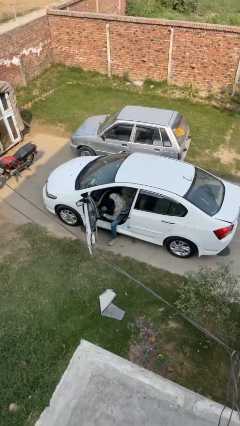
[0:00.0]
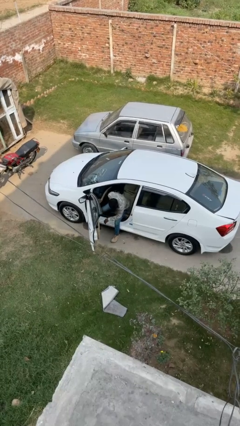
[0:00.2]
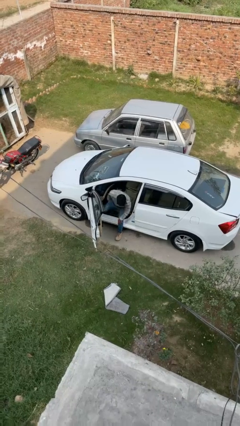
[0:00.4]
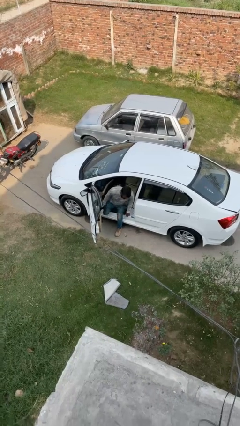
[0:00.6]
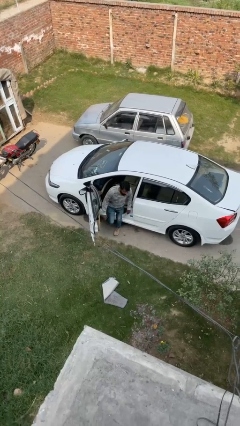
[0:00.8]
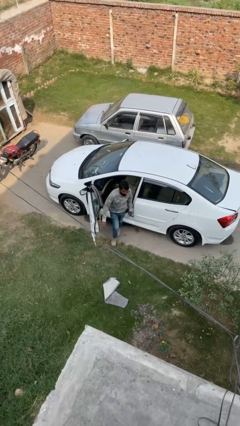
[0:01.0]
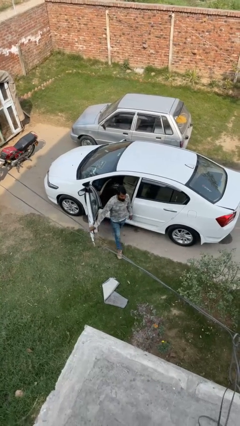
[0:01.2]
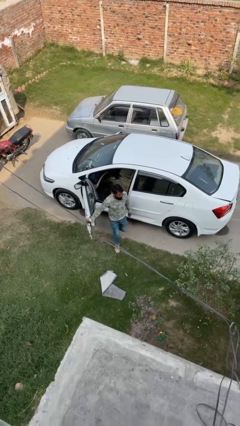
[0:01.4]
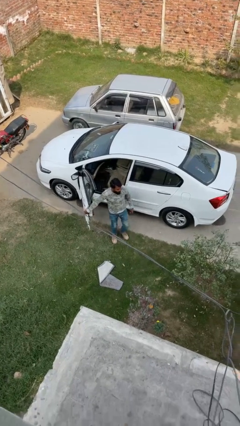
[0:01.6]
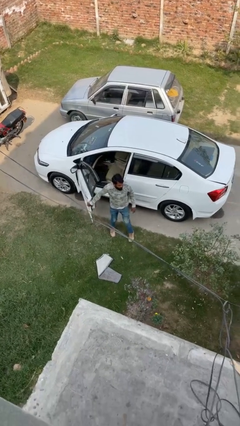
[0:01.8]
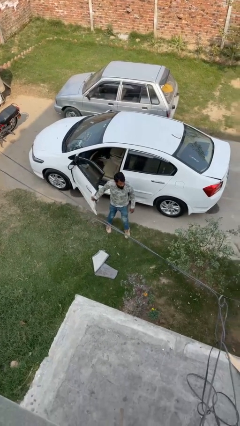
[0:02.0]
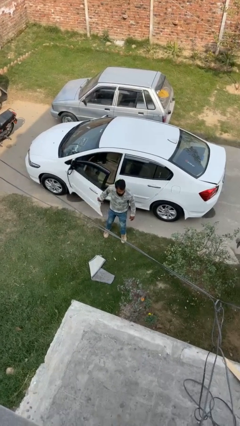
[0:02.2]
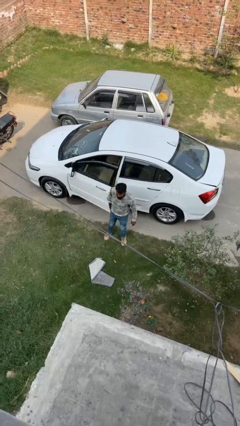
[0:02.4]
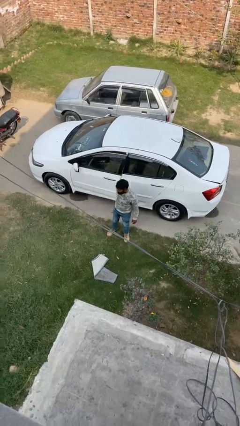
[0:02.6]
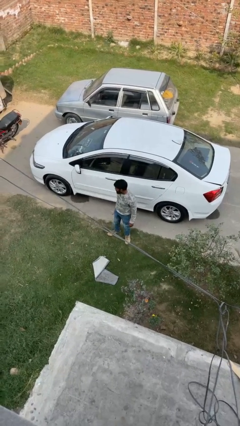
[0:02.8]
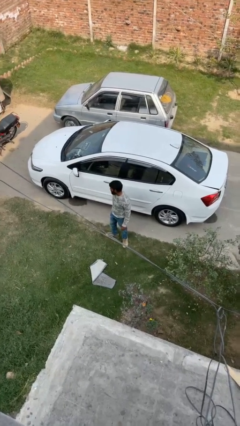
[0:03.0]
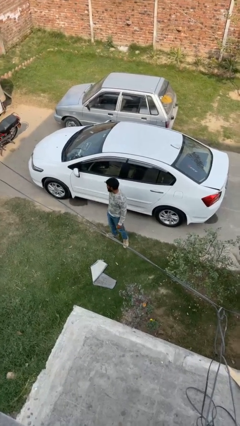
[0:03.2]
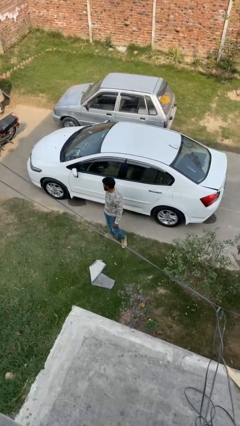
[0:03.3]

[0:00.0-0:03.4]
person exits car

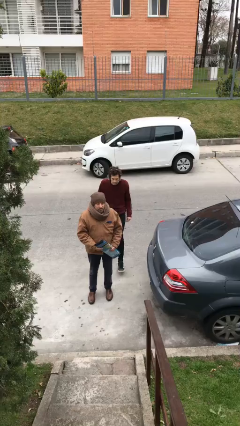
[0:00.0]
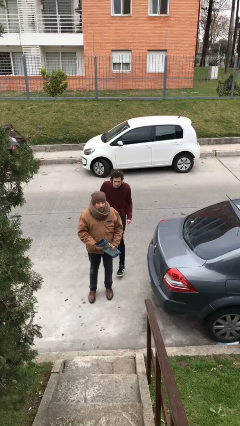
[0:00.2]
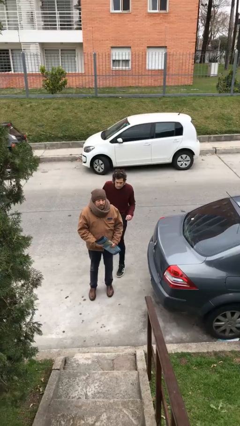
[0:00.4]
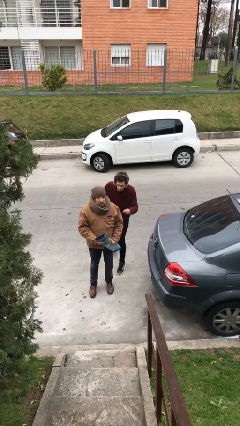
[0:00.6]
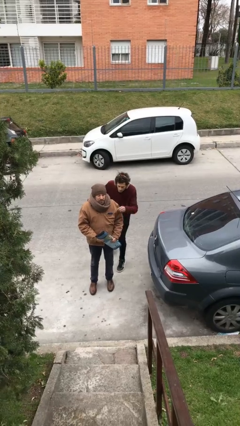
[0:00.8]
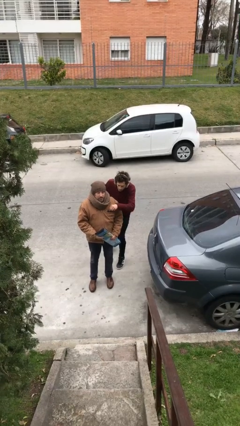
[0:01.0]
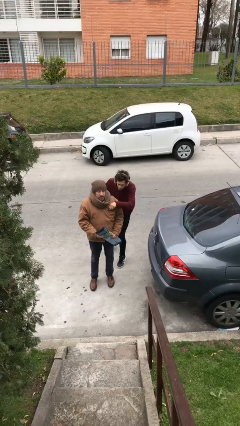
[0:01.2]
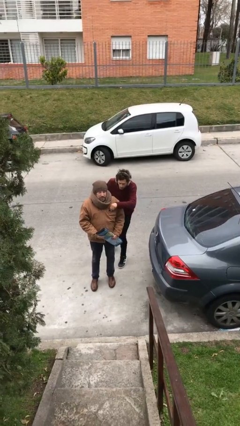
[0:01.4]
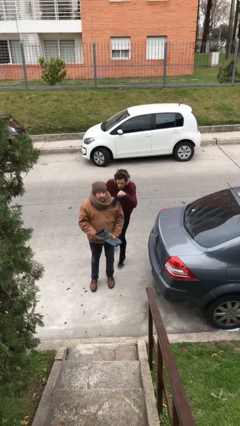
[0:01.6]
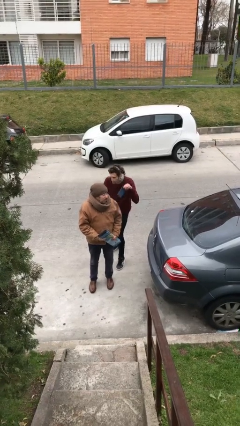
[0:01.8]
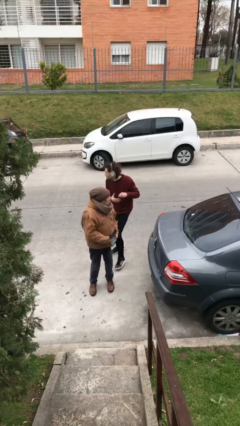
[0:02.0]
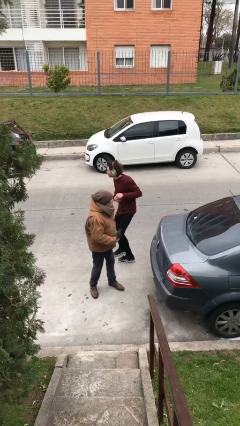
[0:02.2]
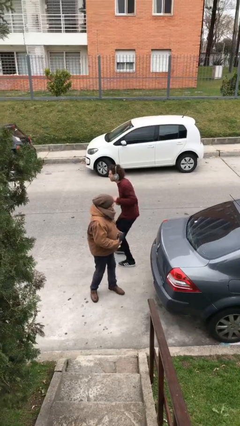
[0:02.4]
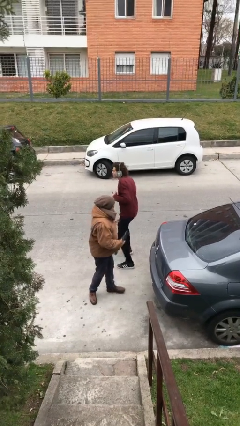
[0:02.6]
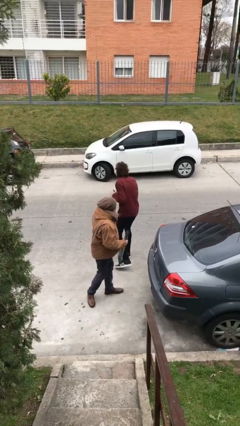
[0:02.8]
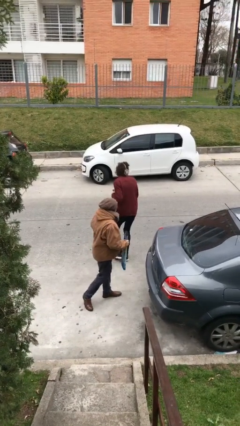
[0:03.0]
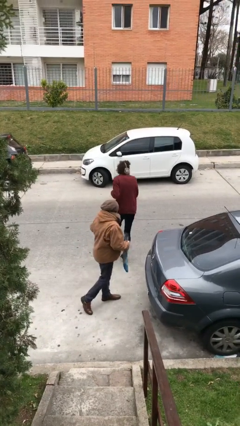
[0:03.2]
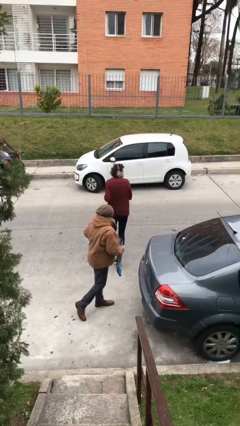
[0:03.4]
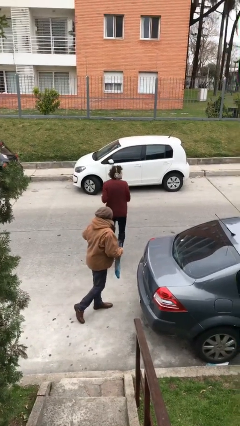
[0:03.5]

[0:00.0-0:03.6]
person steals object from person

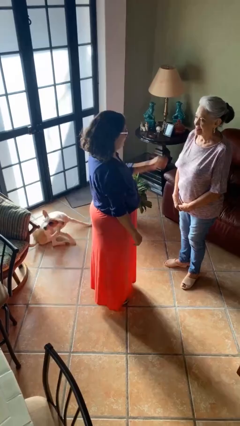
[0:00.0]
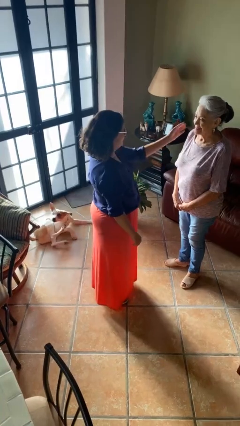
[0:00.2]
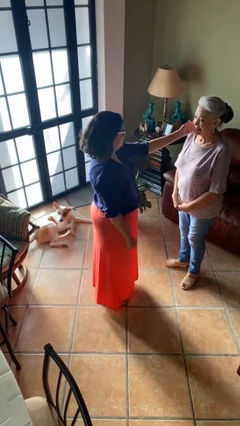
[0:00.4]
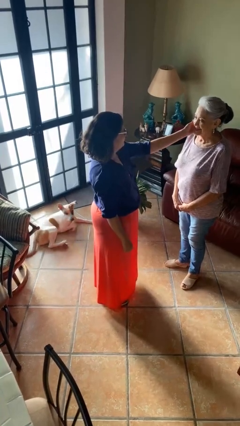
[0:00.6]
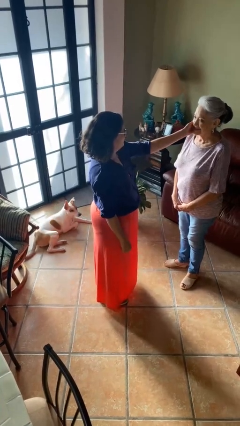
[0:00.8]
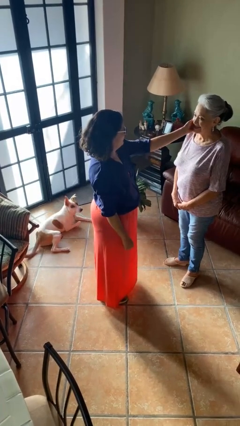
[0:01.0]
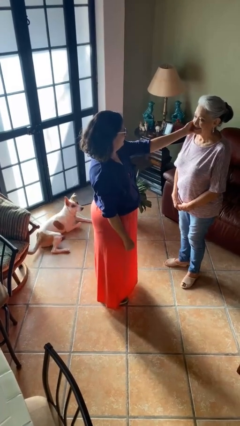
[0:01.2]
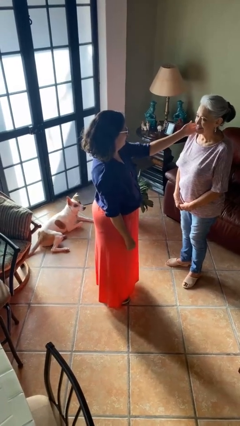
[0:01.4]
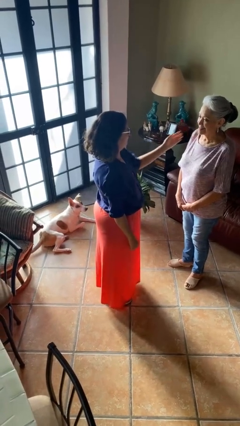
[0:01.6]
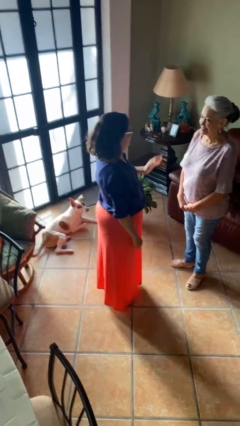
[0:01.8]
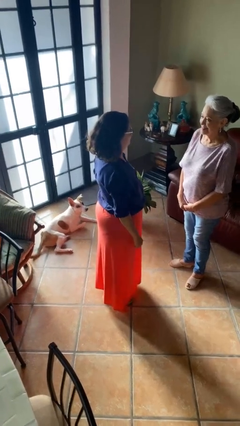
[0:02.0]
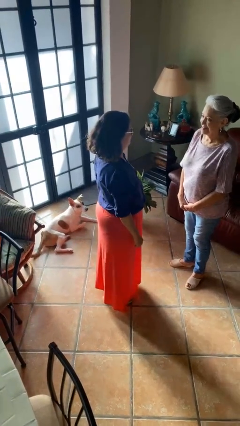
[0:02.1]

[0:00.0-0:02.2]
person touches face of person

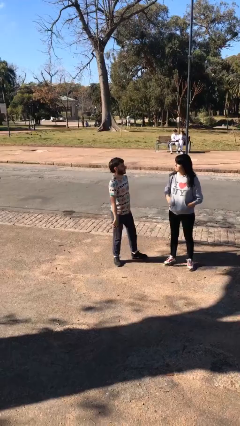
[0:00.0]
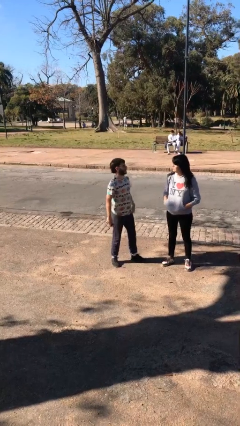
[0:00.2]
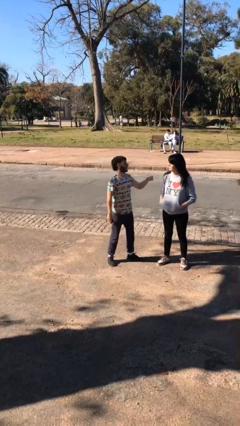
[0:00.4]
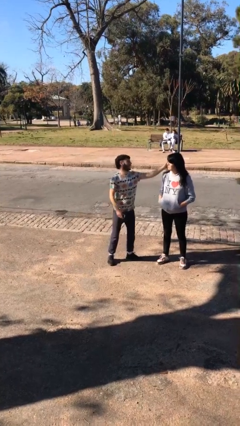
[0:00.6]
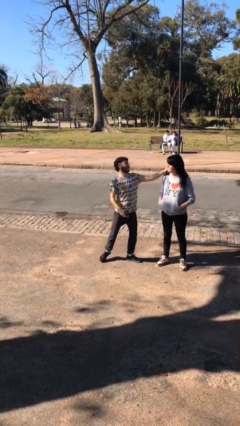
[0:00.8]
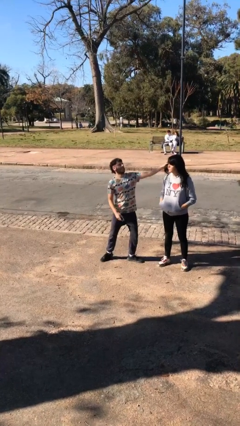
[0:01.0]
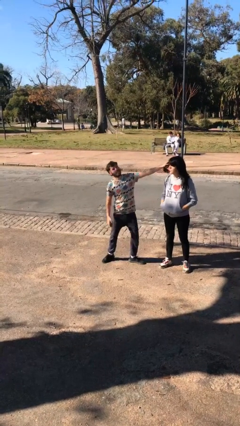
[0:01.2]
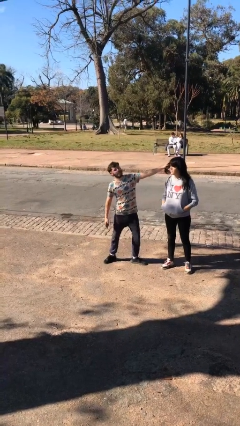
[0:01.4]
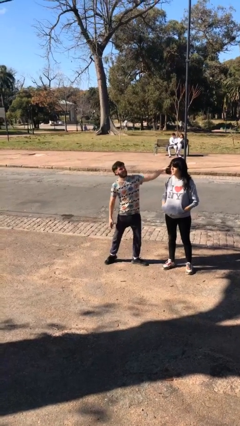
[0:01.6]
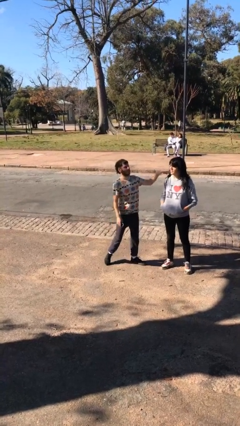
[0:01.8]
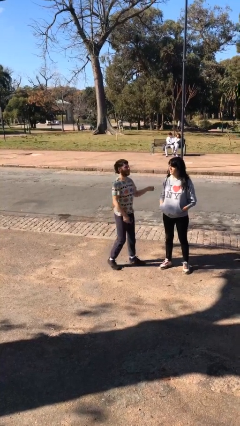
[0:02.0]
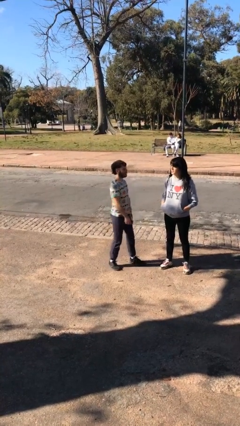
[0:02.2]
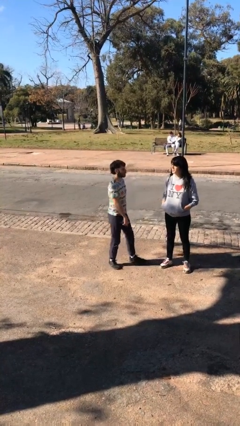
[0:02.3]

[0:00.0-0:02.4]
person grabs person by hair

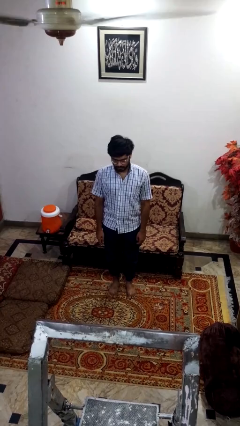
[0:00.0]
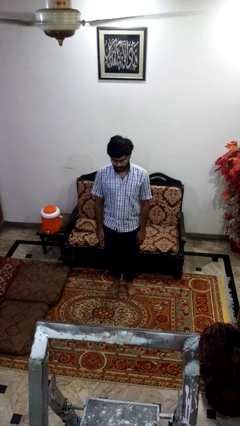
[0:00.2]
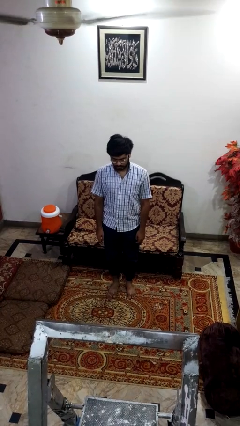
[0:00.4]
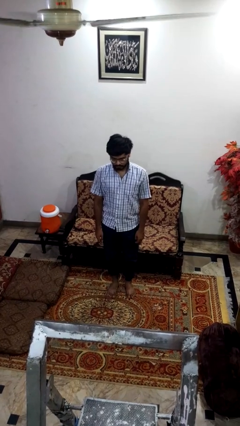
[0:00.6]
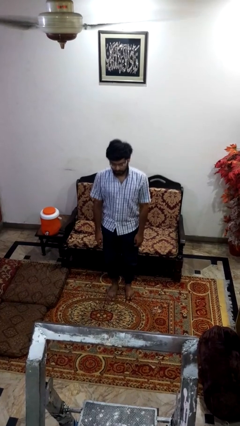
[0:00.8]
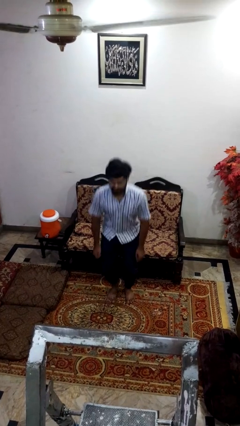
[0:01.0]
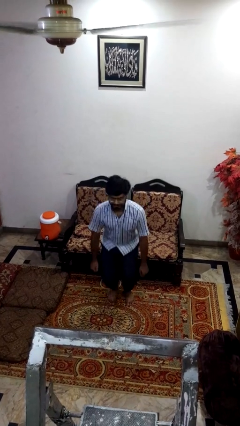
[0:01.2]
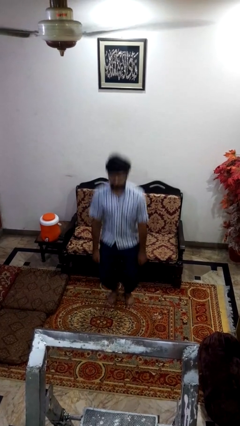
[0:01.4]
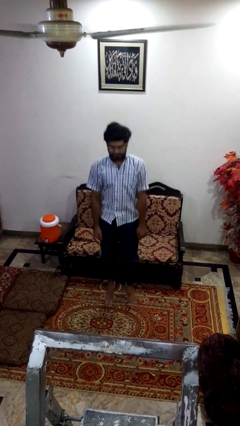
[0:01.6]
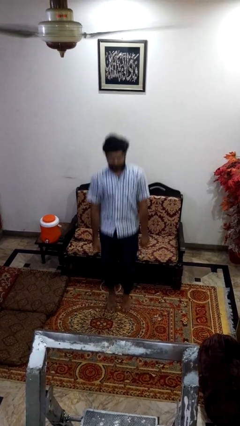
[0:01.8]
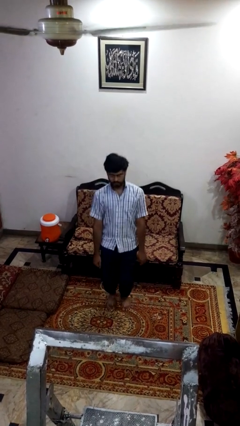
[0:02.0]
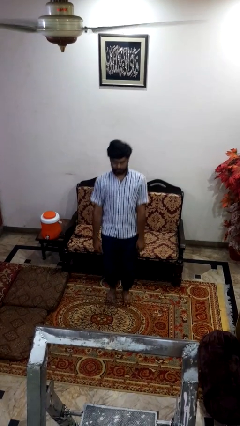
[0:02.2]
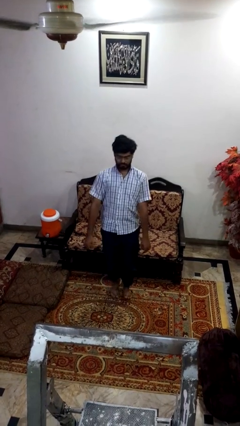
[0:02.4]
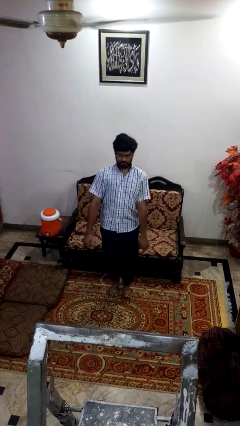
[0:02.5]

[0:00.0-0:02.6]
person jumps

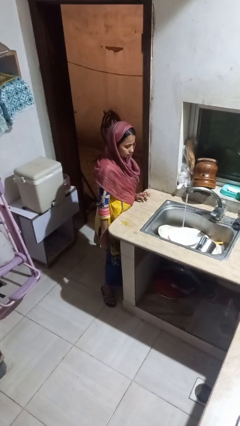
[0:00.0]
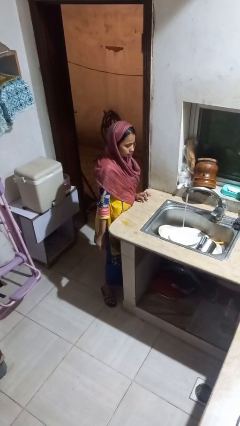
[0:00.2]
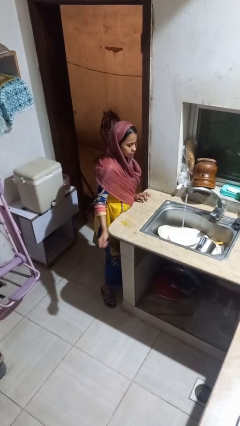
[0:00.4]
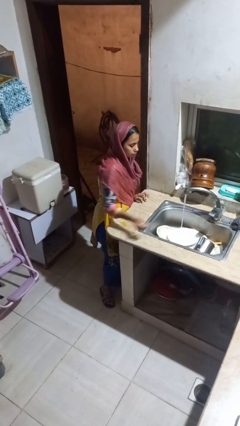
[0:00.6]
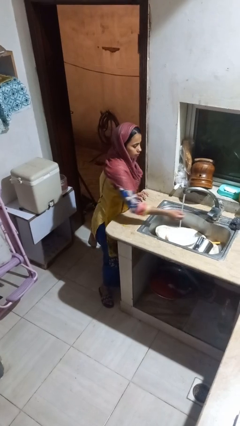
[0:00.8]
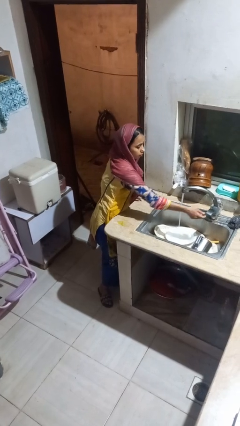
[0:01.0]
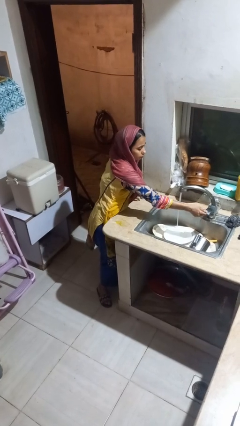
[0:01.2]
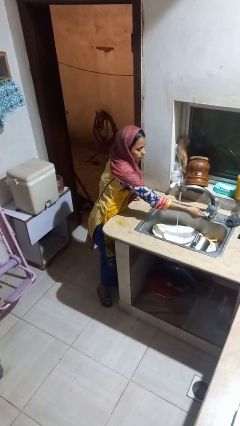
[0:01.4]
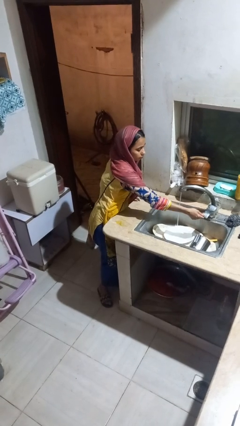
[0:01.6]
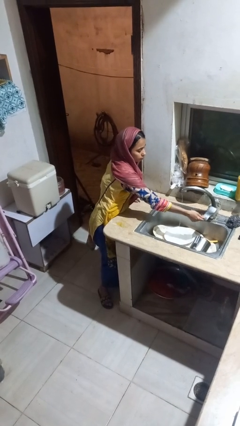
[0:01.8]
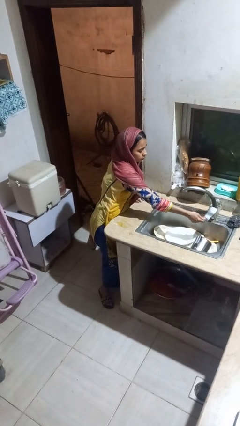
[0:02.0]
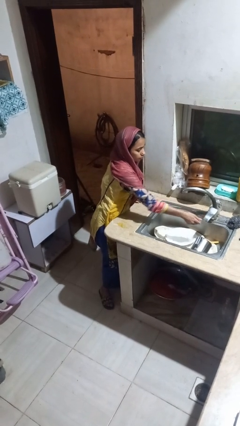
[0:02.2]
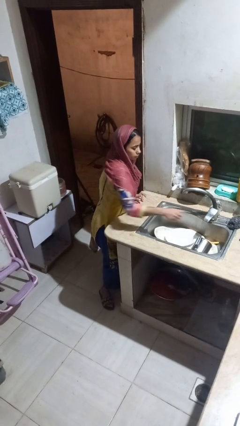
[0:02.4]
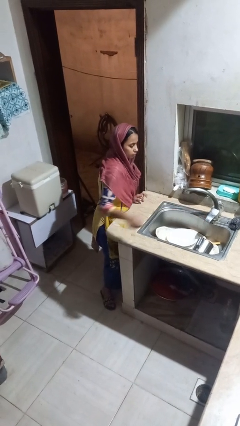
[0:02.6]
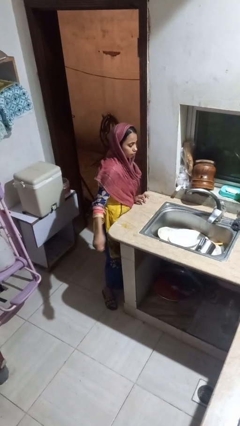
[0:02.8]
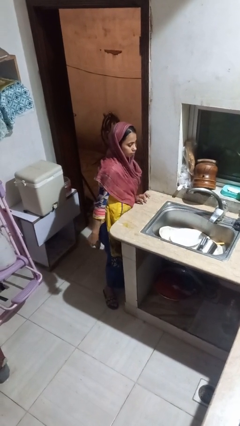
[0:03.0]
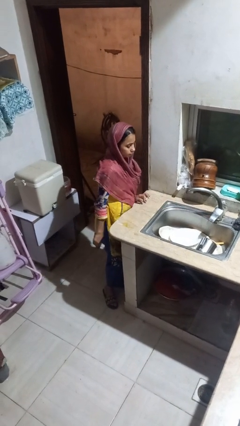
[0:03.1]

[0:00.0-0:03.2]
person turns off faucet
